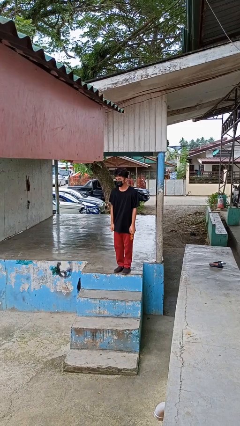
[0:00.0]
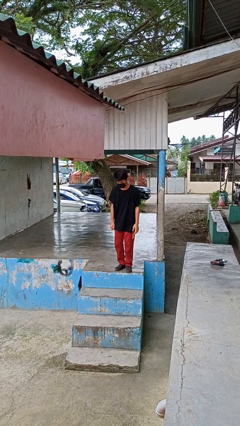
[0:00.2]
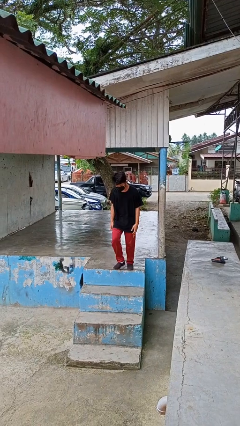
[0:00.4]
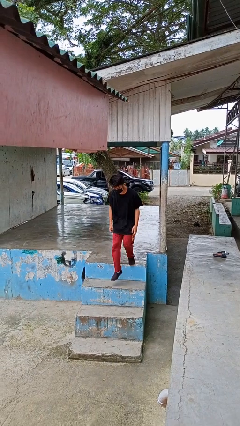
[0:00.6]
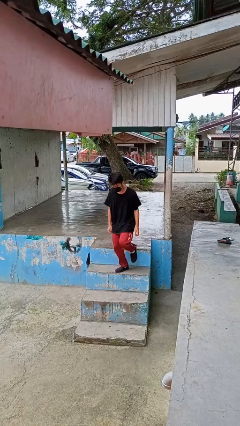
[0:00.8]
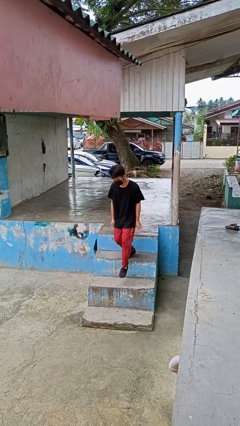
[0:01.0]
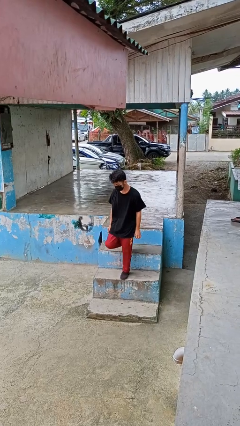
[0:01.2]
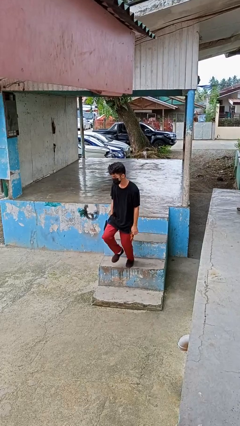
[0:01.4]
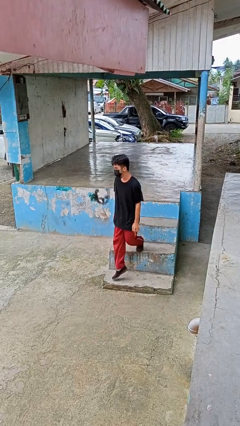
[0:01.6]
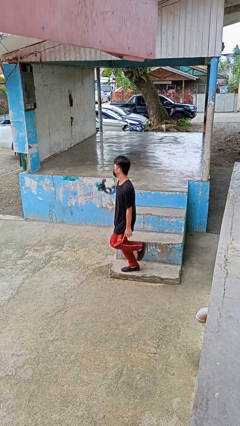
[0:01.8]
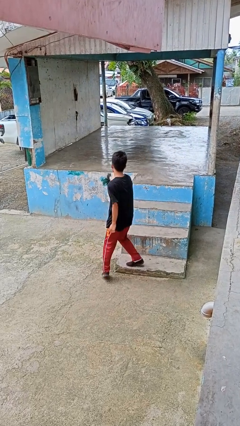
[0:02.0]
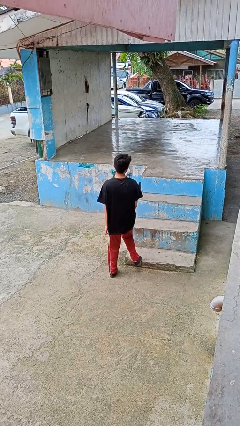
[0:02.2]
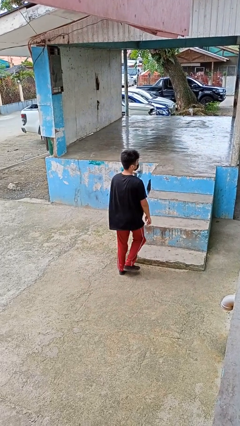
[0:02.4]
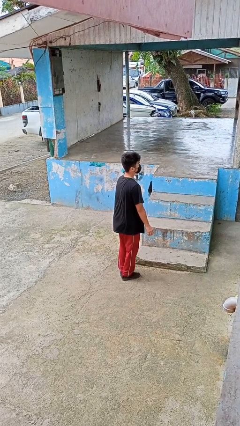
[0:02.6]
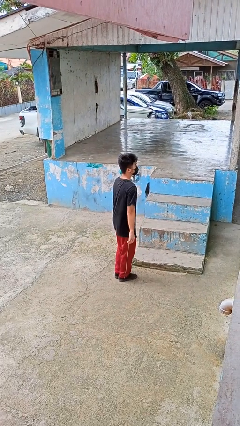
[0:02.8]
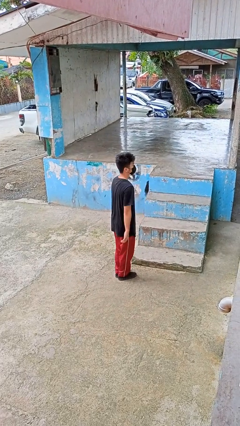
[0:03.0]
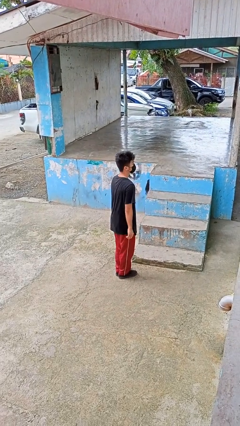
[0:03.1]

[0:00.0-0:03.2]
person climbs down stairs

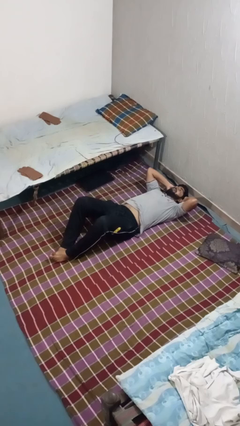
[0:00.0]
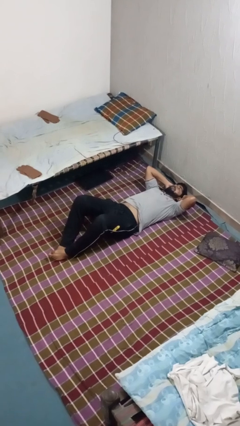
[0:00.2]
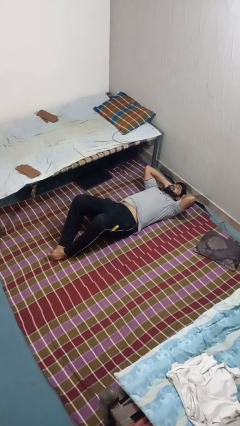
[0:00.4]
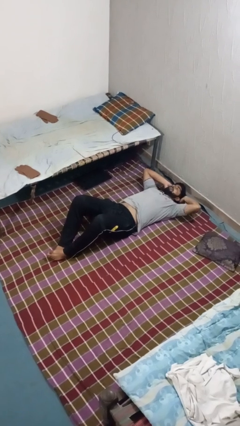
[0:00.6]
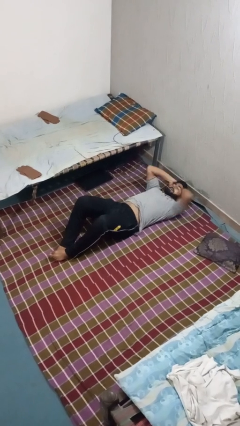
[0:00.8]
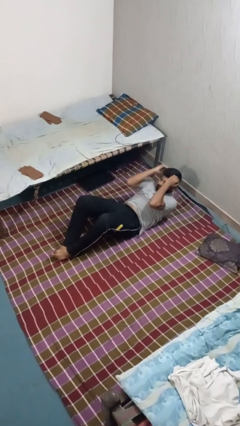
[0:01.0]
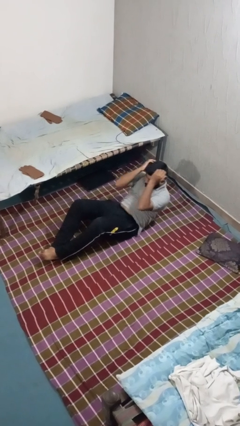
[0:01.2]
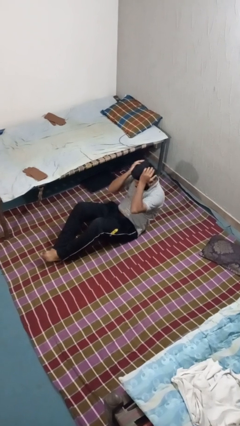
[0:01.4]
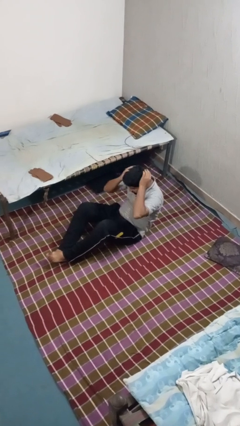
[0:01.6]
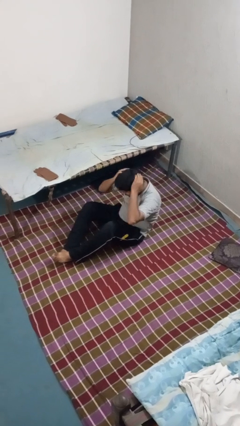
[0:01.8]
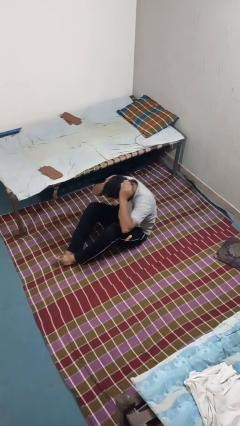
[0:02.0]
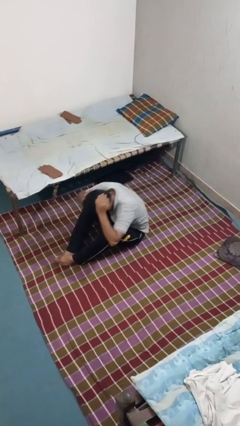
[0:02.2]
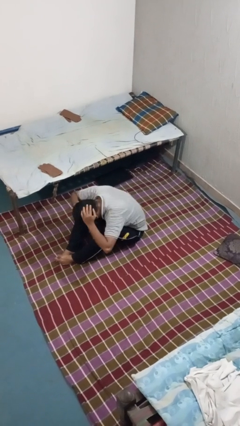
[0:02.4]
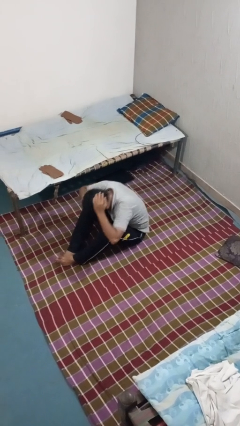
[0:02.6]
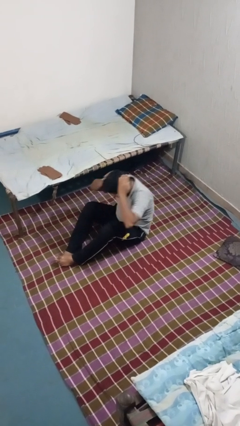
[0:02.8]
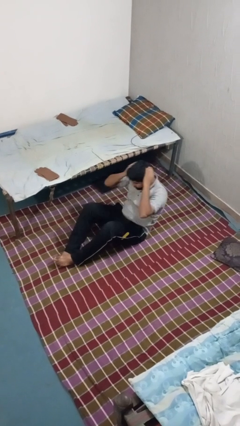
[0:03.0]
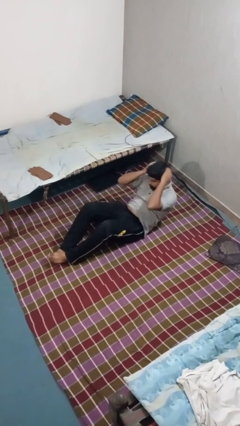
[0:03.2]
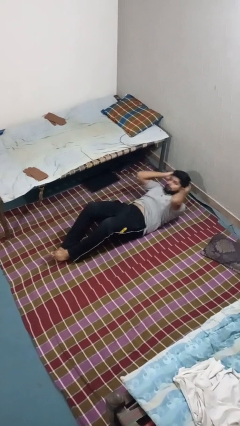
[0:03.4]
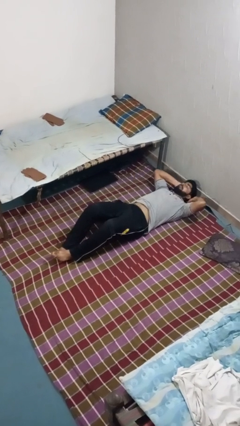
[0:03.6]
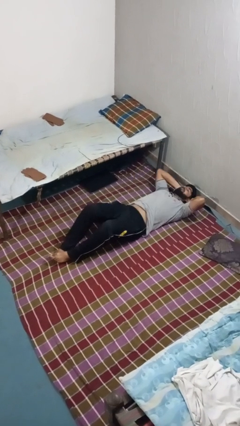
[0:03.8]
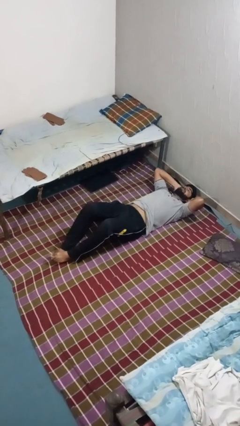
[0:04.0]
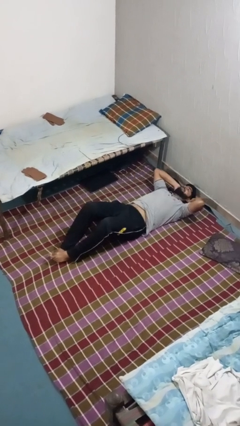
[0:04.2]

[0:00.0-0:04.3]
person exercises with situp

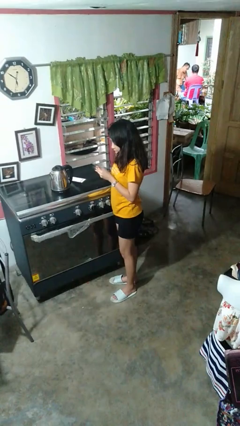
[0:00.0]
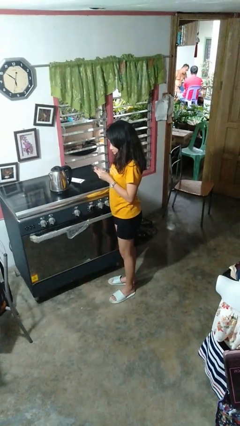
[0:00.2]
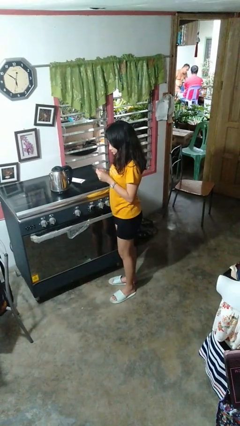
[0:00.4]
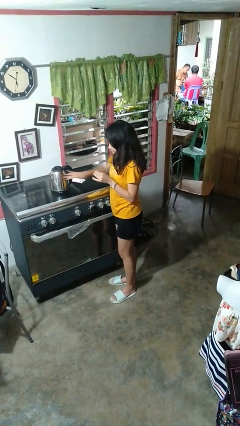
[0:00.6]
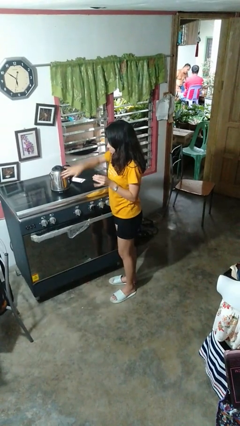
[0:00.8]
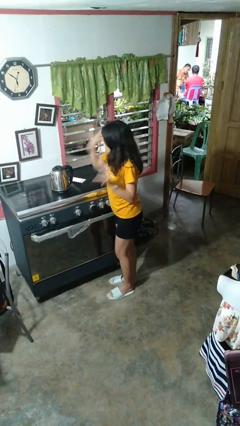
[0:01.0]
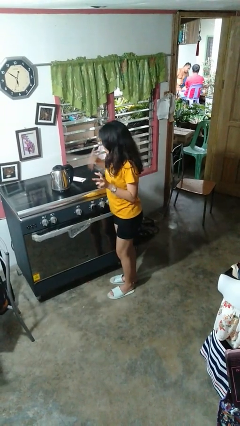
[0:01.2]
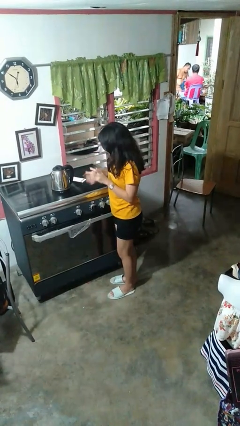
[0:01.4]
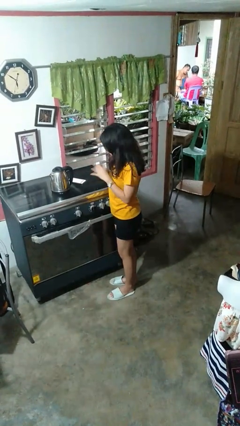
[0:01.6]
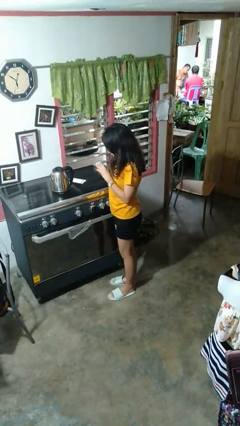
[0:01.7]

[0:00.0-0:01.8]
person burns hand

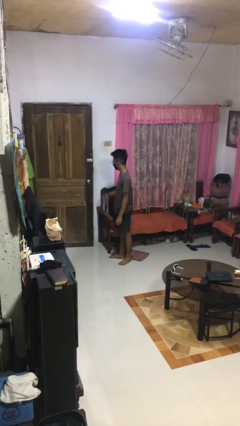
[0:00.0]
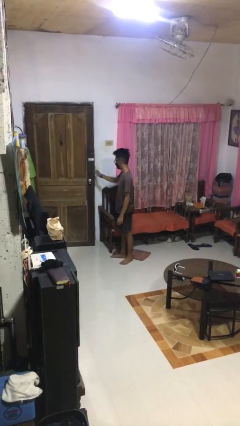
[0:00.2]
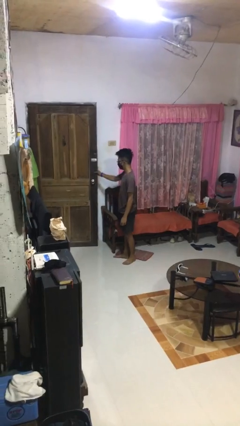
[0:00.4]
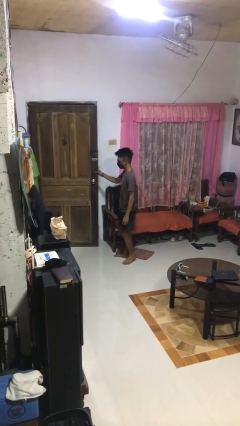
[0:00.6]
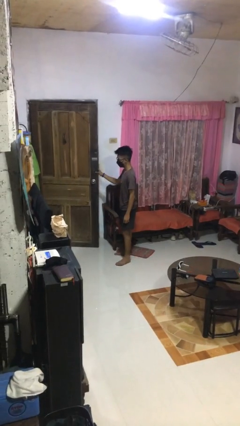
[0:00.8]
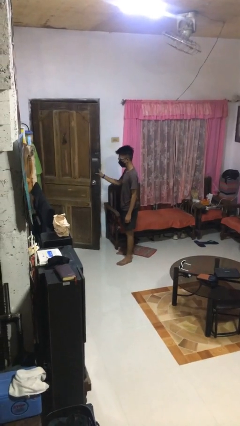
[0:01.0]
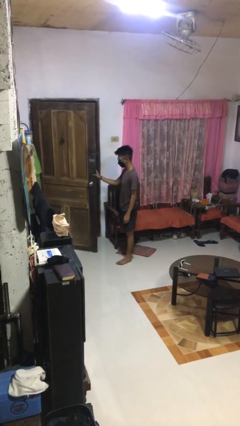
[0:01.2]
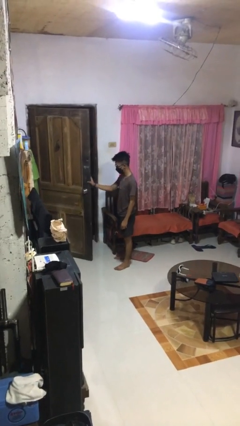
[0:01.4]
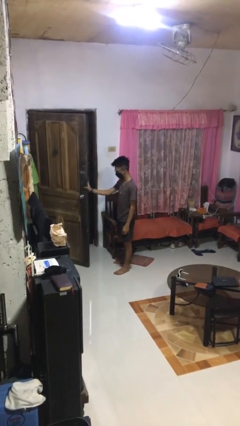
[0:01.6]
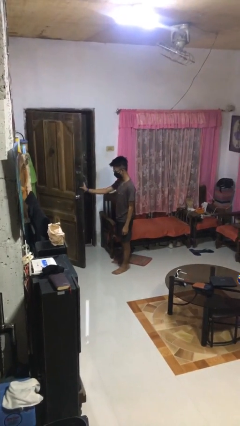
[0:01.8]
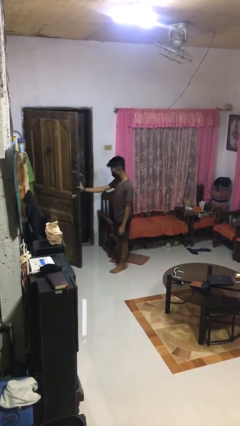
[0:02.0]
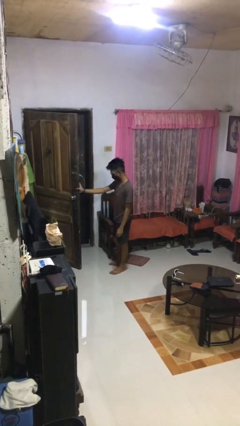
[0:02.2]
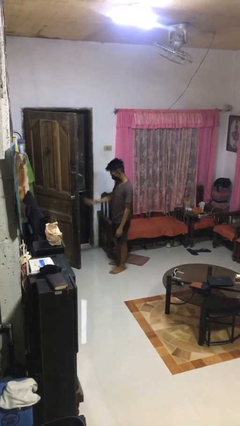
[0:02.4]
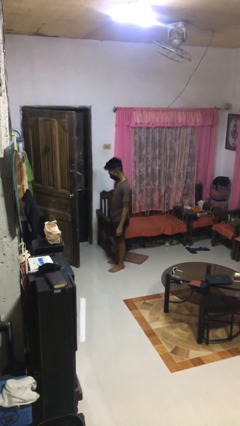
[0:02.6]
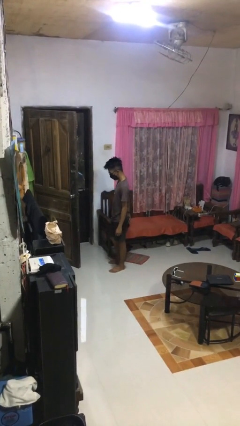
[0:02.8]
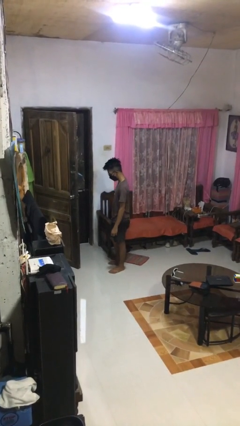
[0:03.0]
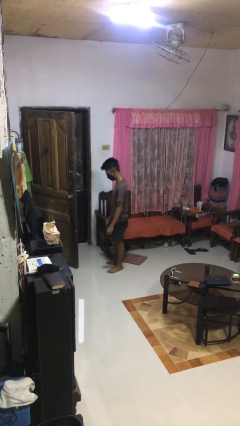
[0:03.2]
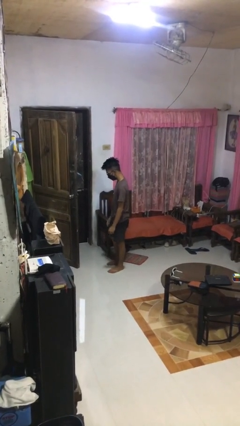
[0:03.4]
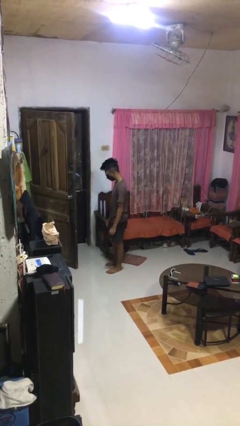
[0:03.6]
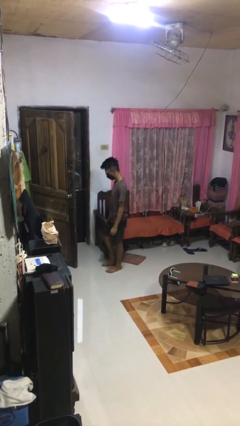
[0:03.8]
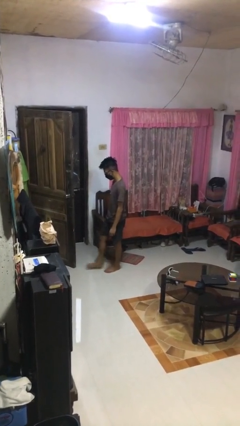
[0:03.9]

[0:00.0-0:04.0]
person opens facility door

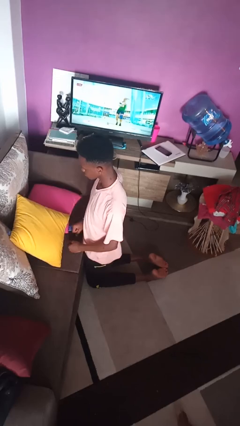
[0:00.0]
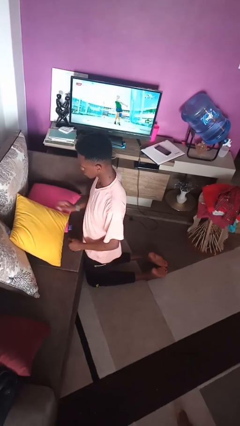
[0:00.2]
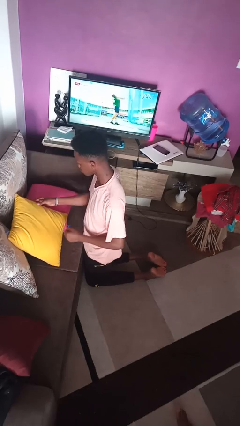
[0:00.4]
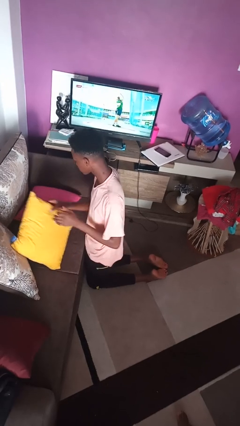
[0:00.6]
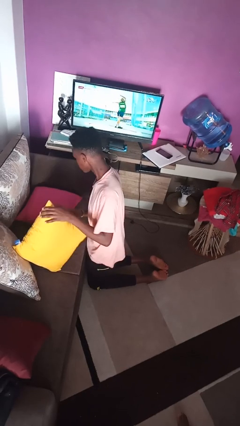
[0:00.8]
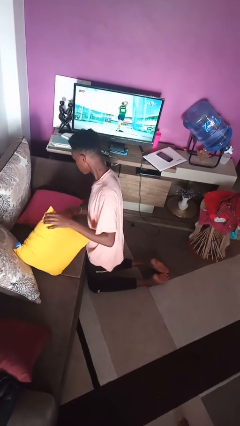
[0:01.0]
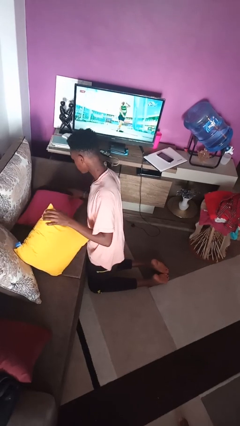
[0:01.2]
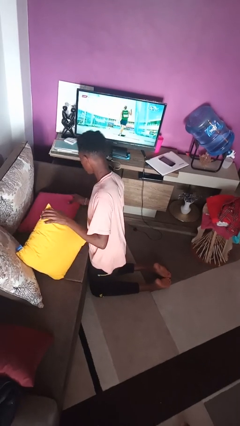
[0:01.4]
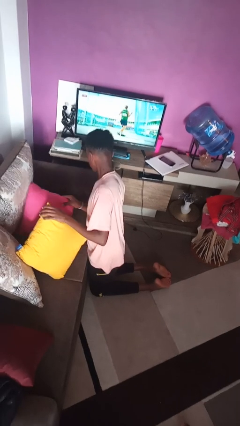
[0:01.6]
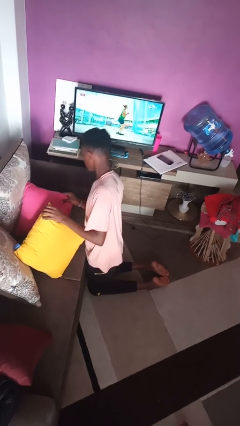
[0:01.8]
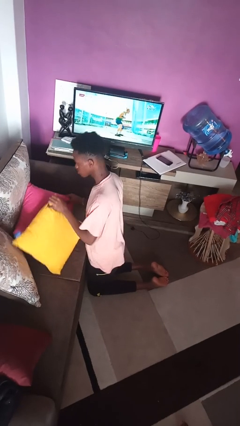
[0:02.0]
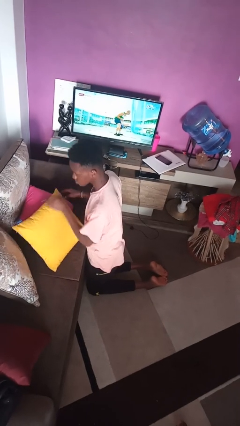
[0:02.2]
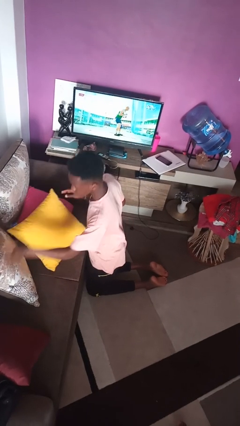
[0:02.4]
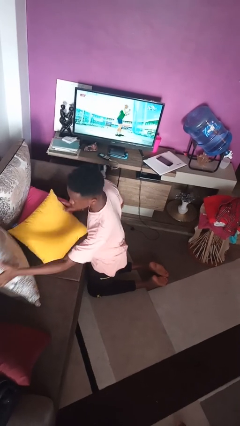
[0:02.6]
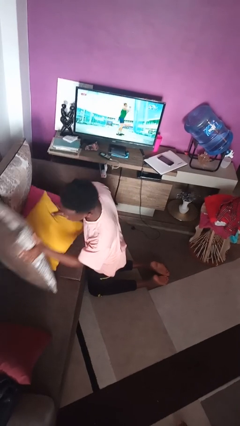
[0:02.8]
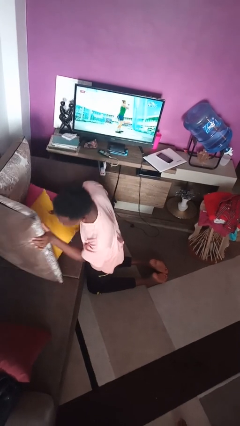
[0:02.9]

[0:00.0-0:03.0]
person searches in couch

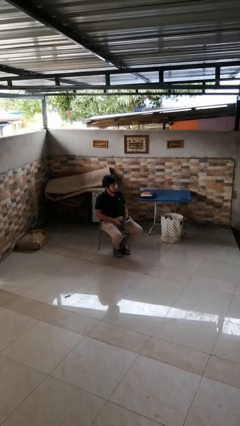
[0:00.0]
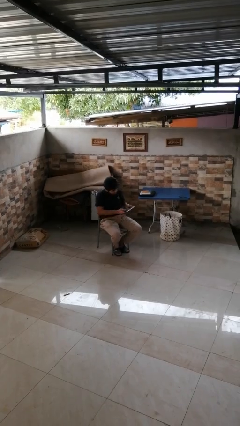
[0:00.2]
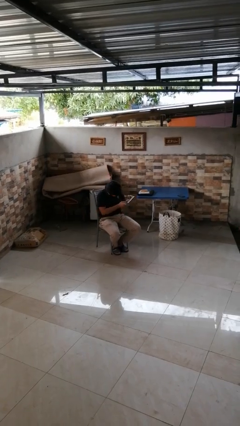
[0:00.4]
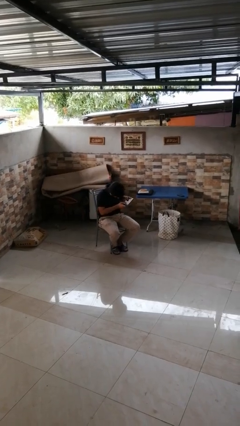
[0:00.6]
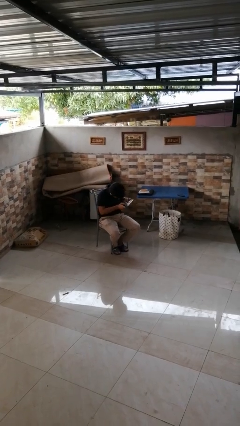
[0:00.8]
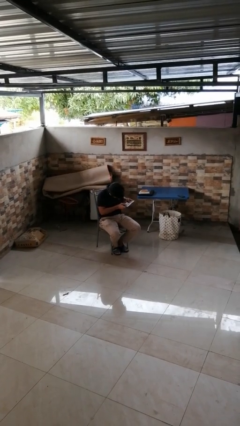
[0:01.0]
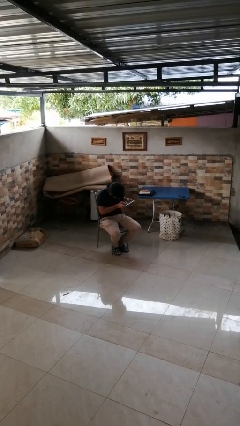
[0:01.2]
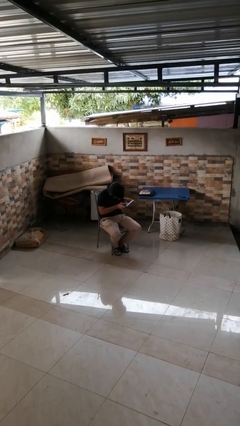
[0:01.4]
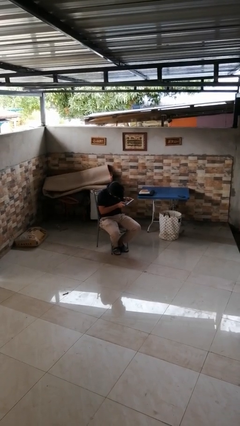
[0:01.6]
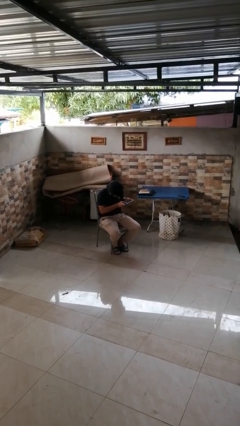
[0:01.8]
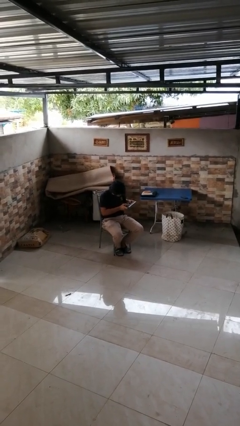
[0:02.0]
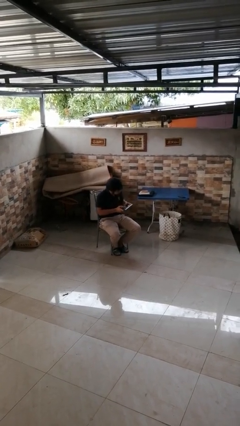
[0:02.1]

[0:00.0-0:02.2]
person interacts with handheld game
